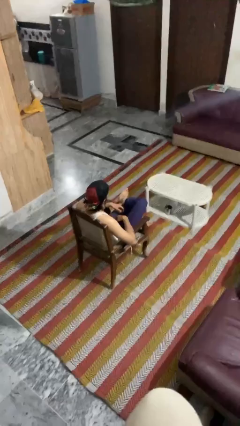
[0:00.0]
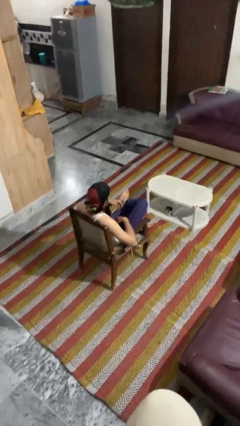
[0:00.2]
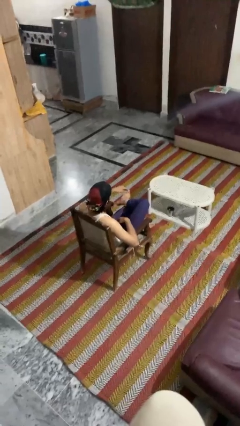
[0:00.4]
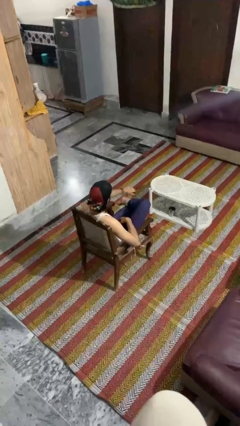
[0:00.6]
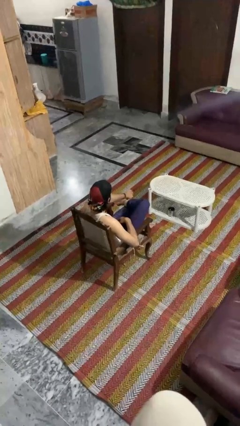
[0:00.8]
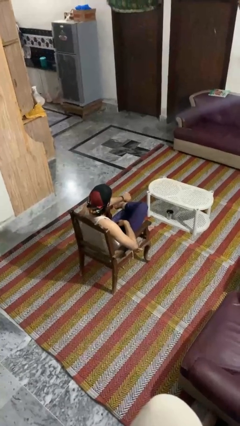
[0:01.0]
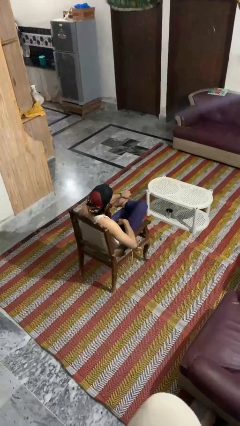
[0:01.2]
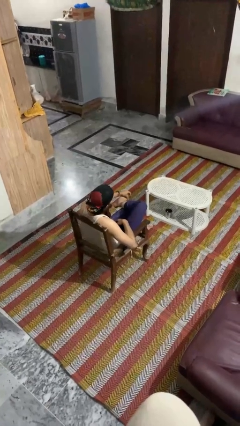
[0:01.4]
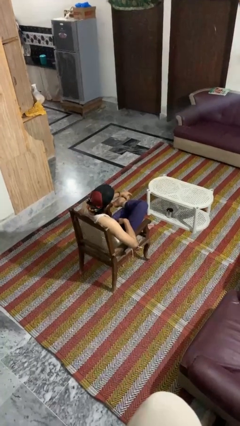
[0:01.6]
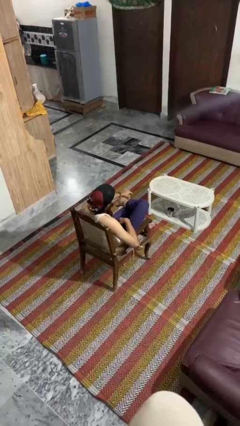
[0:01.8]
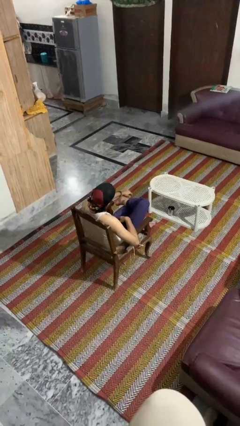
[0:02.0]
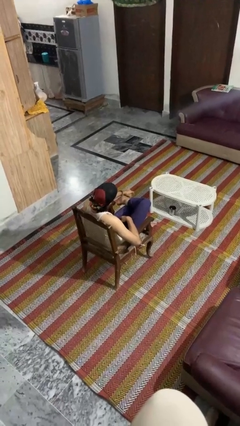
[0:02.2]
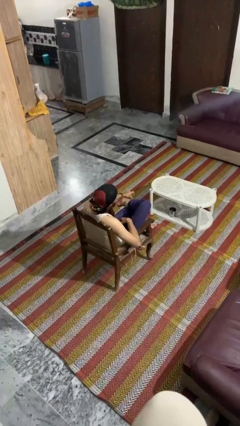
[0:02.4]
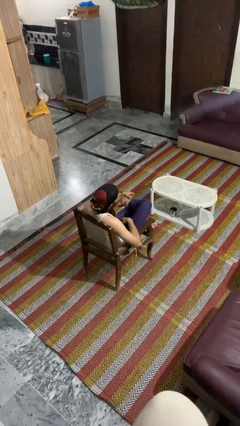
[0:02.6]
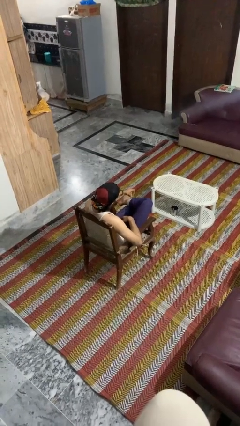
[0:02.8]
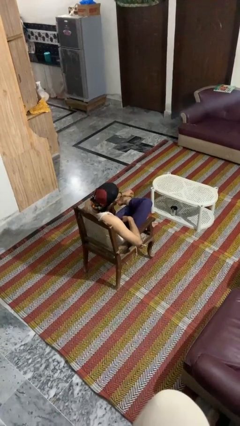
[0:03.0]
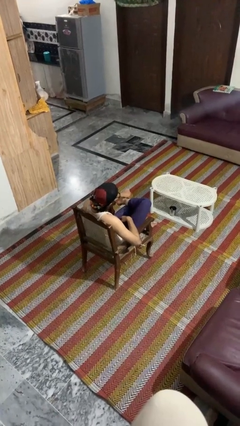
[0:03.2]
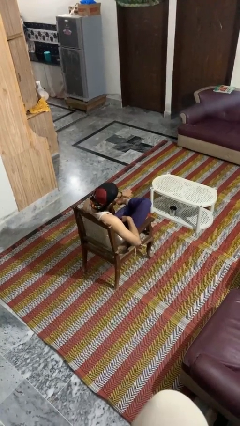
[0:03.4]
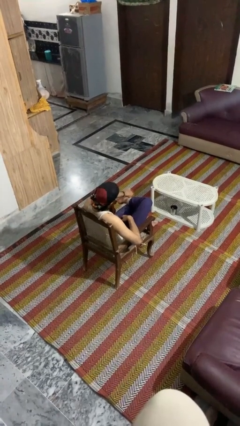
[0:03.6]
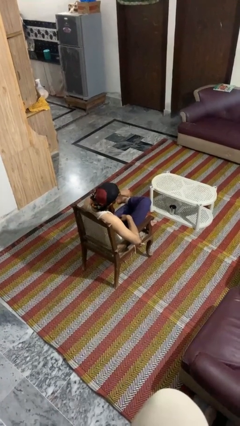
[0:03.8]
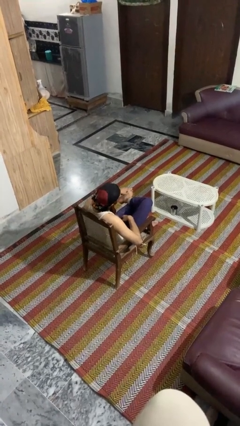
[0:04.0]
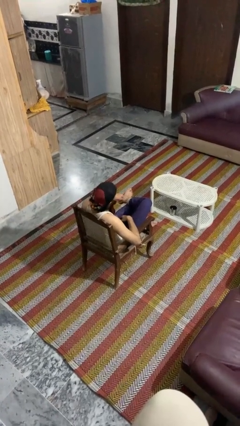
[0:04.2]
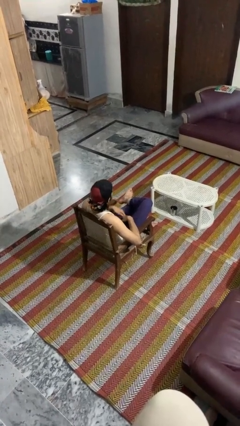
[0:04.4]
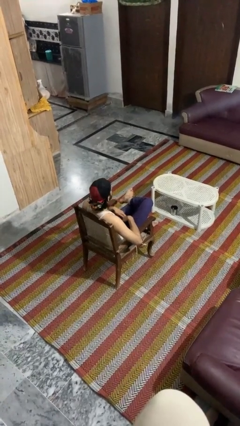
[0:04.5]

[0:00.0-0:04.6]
person rubs foot

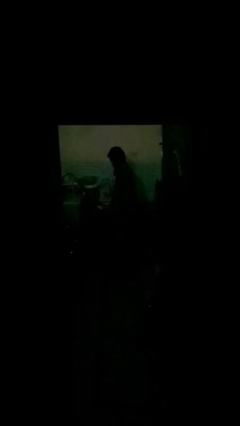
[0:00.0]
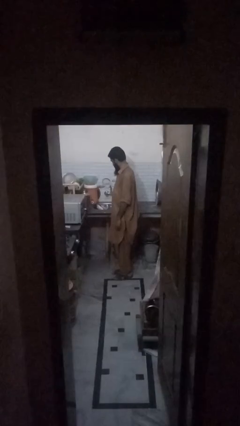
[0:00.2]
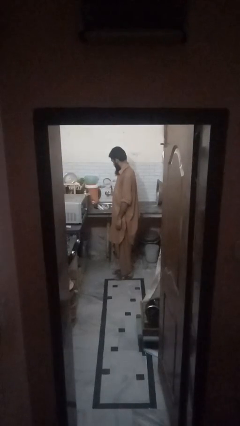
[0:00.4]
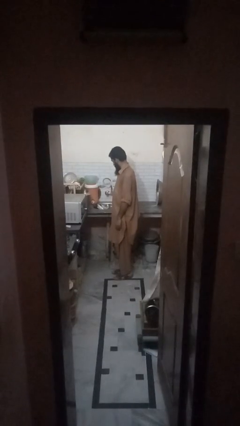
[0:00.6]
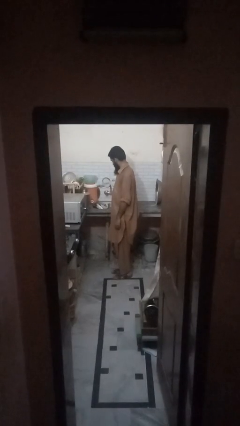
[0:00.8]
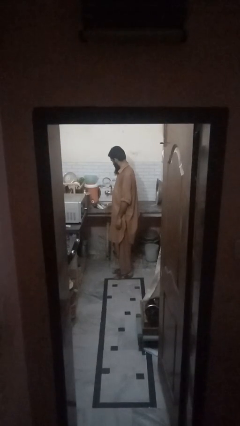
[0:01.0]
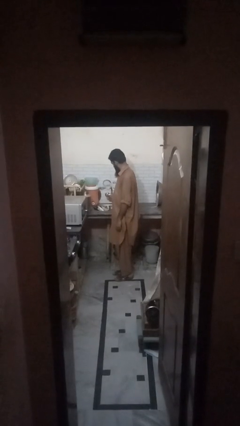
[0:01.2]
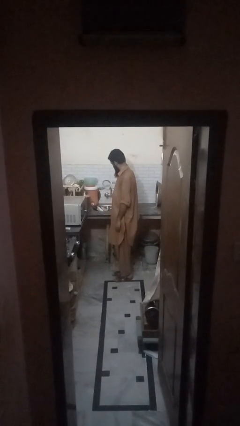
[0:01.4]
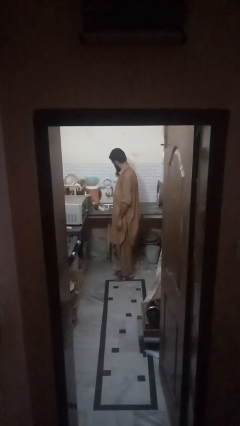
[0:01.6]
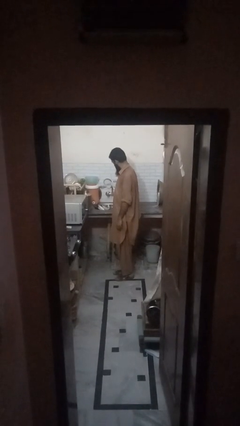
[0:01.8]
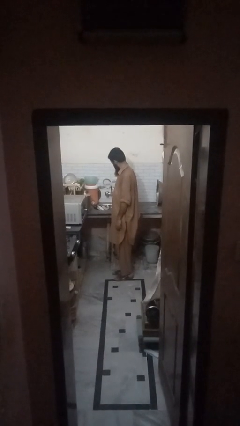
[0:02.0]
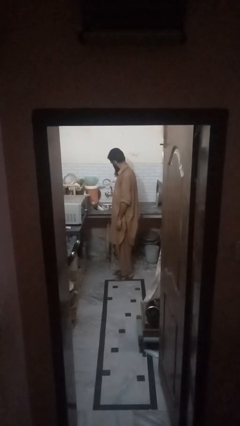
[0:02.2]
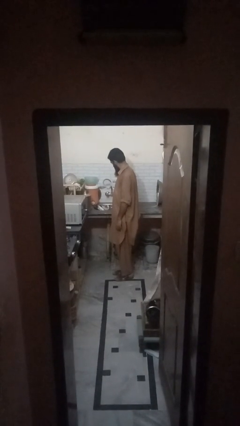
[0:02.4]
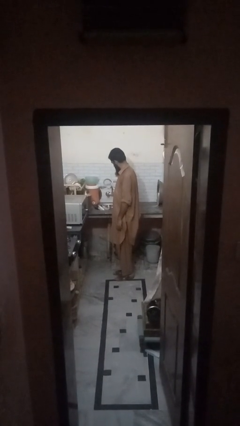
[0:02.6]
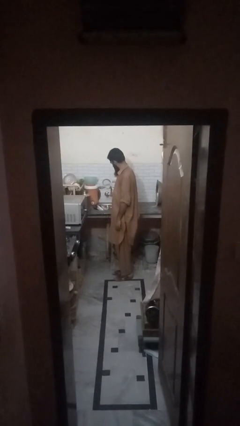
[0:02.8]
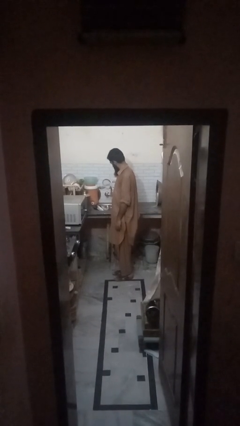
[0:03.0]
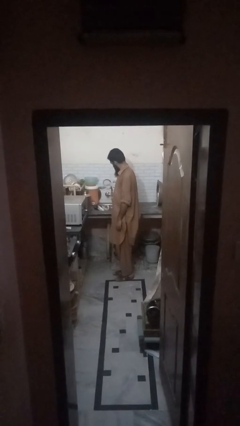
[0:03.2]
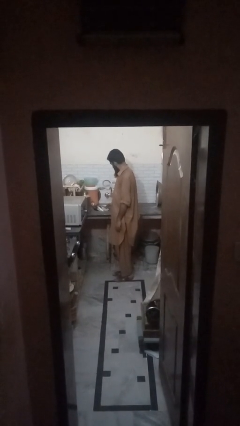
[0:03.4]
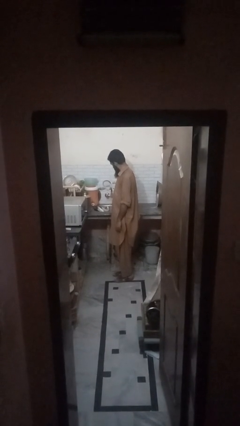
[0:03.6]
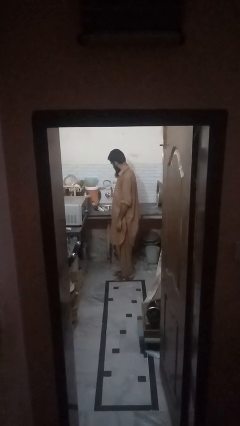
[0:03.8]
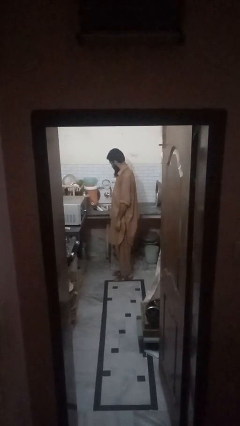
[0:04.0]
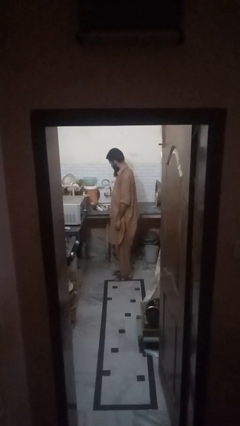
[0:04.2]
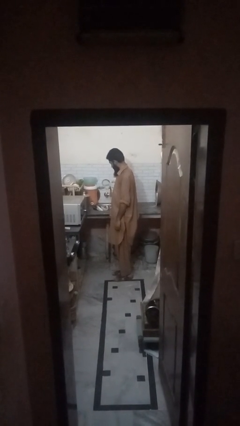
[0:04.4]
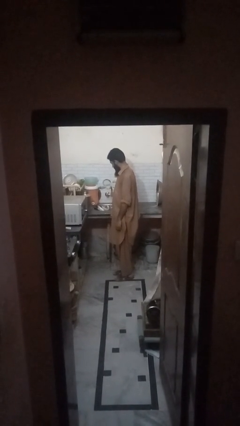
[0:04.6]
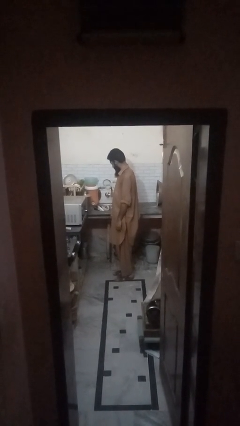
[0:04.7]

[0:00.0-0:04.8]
person opens dishwasher

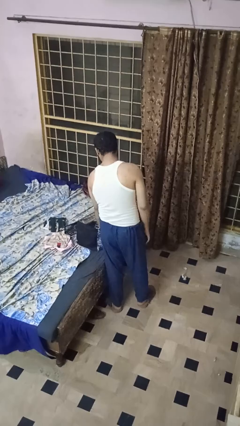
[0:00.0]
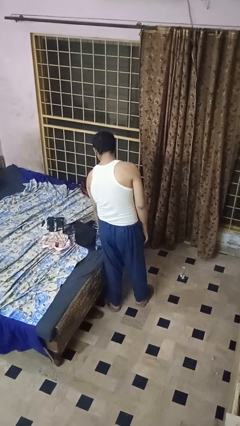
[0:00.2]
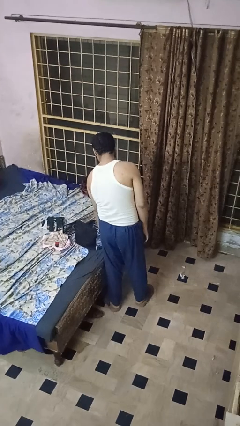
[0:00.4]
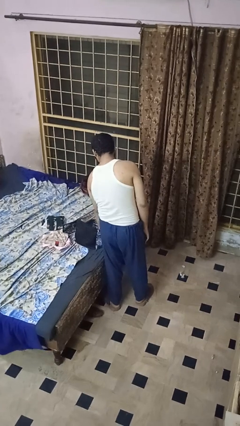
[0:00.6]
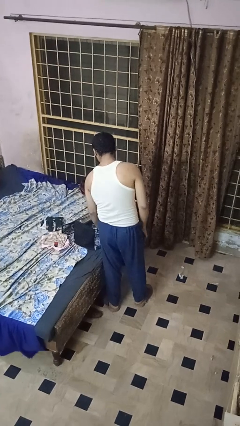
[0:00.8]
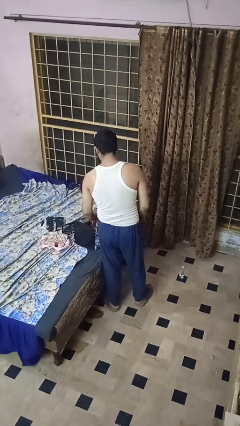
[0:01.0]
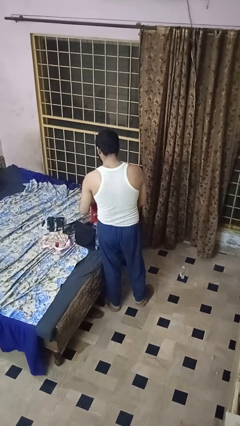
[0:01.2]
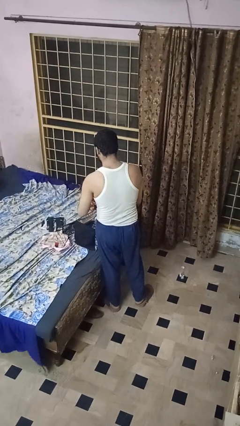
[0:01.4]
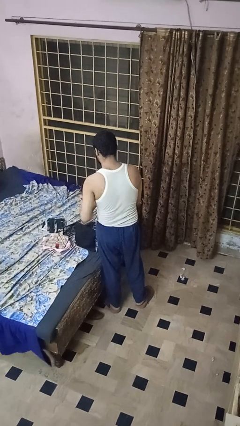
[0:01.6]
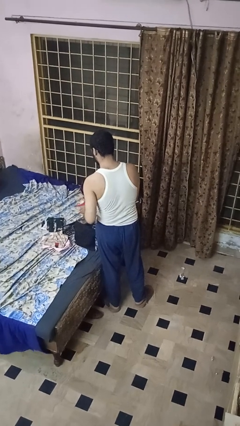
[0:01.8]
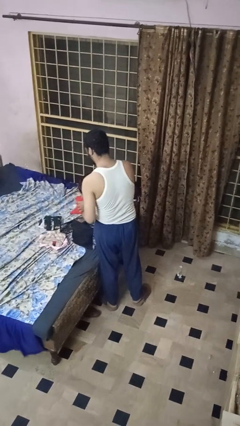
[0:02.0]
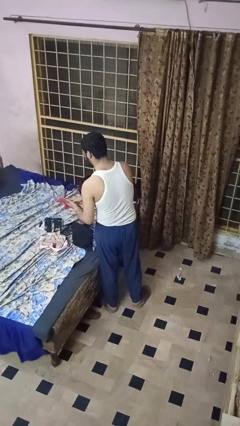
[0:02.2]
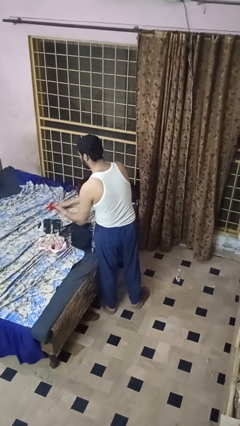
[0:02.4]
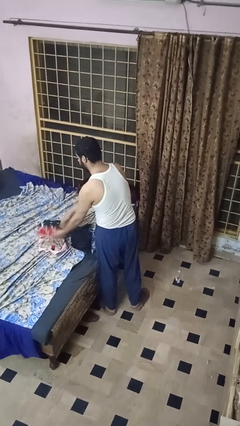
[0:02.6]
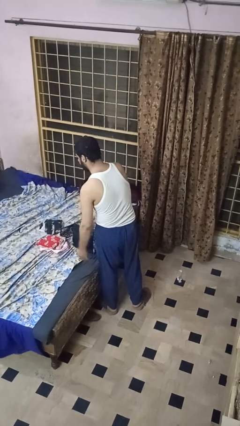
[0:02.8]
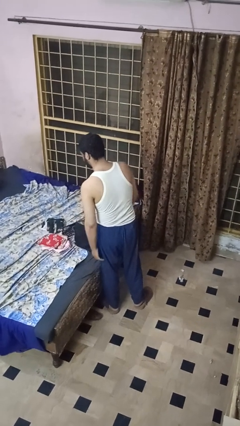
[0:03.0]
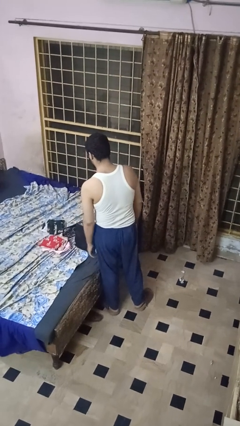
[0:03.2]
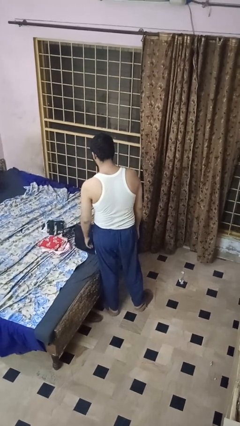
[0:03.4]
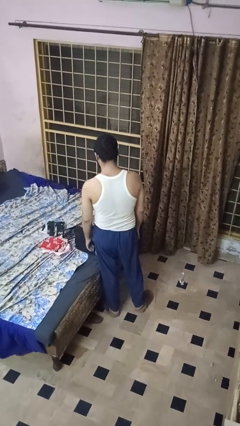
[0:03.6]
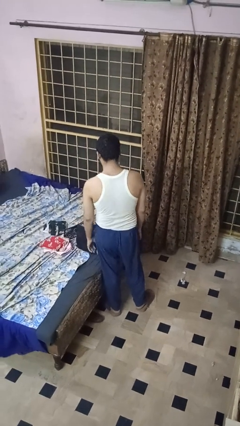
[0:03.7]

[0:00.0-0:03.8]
person unloads clothes from suitcase

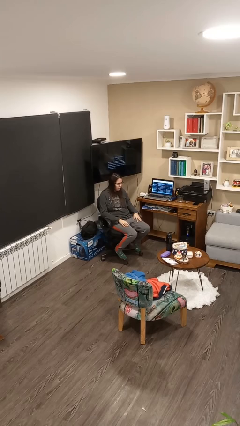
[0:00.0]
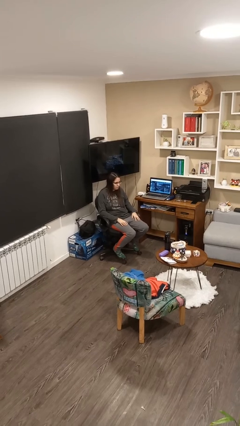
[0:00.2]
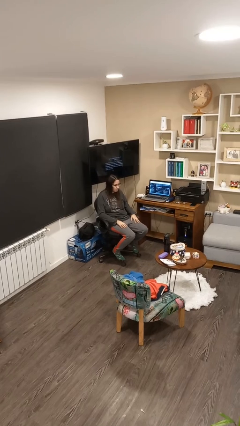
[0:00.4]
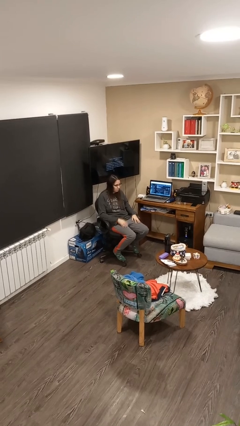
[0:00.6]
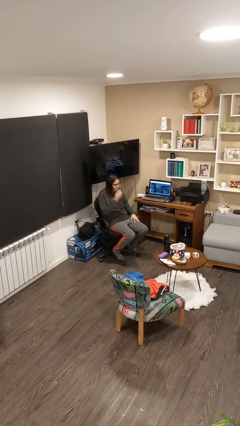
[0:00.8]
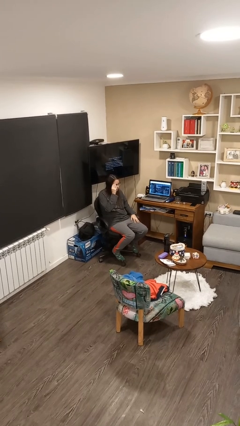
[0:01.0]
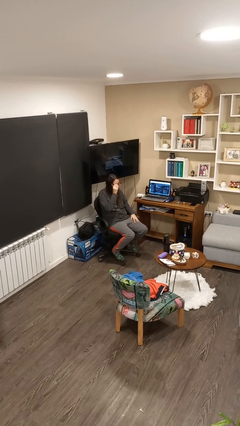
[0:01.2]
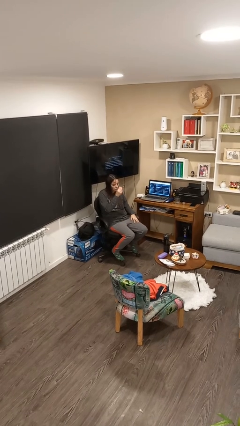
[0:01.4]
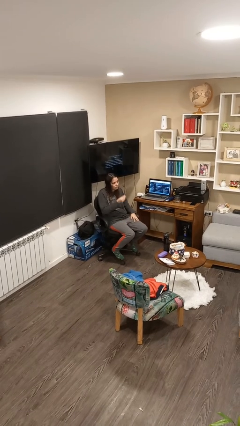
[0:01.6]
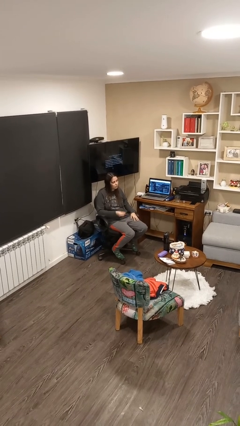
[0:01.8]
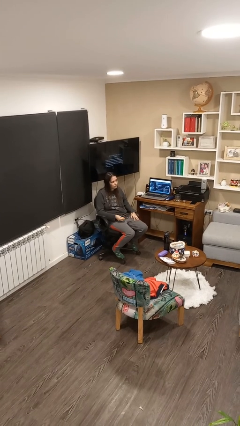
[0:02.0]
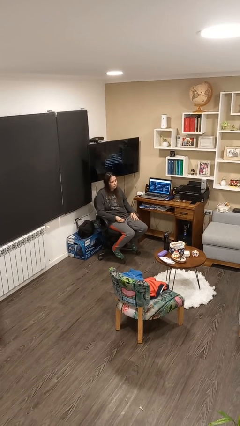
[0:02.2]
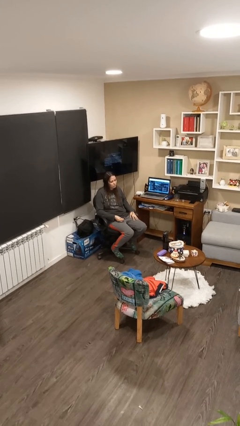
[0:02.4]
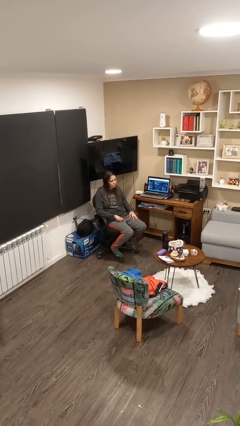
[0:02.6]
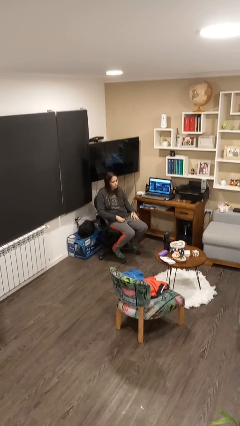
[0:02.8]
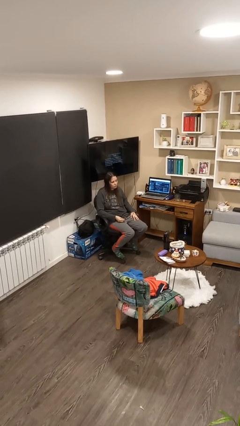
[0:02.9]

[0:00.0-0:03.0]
person takes off glasses

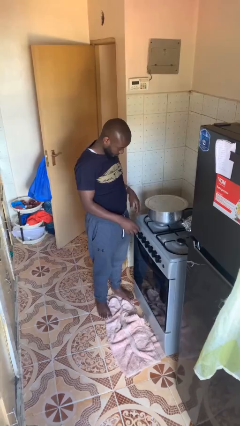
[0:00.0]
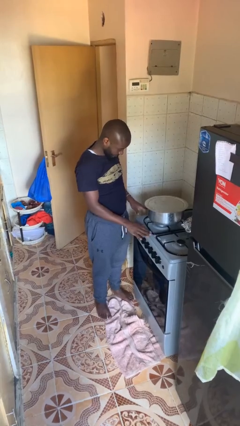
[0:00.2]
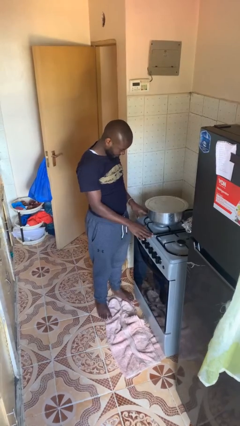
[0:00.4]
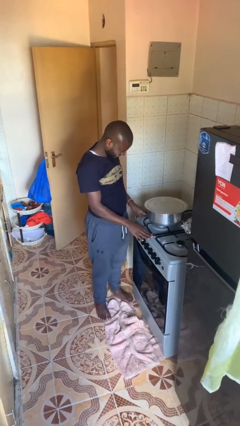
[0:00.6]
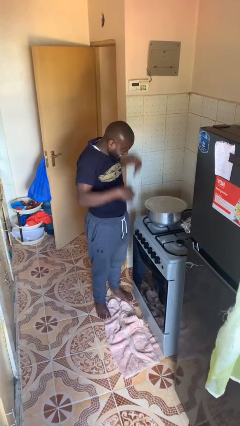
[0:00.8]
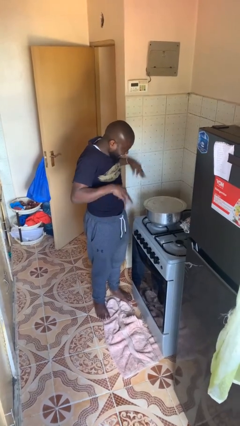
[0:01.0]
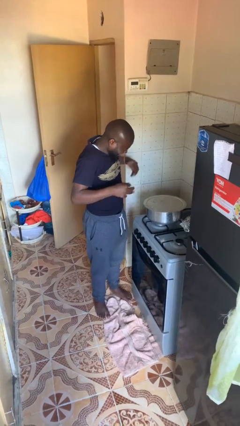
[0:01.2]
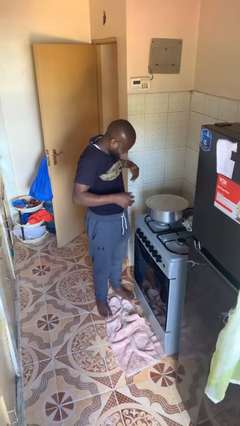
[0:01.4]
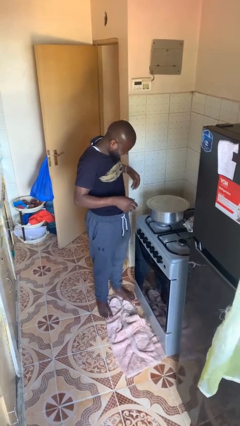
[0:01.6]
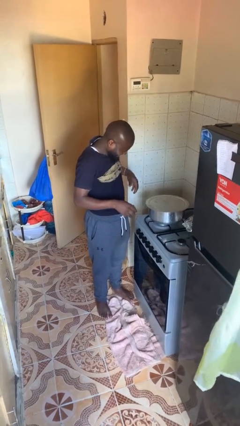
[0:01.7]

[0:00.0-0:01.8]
person burns hand
